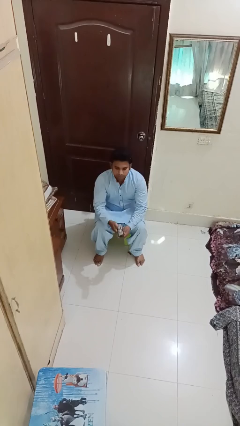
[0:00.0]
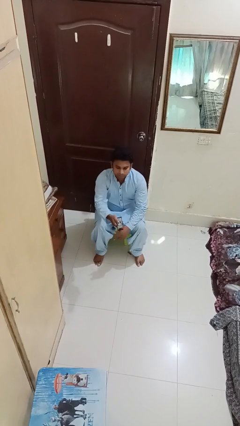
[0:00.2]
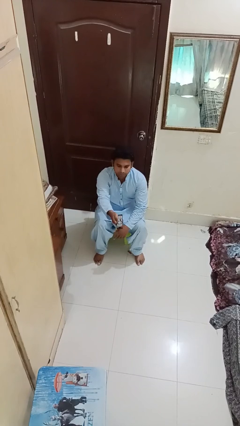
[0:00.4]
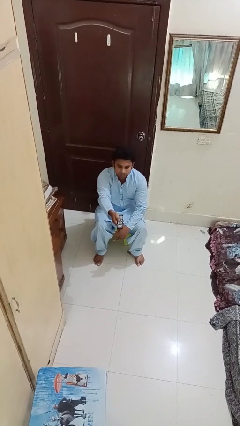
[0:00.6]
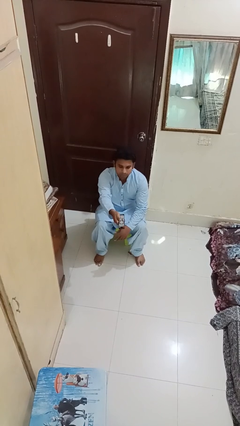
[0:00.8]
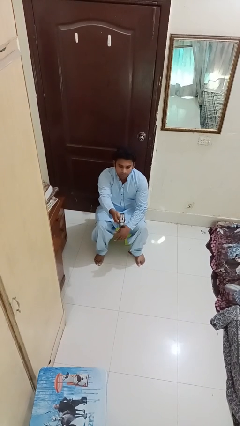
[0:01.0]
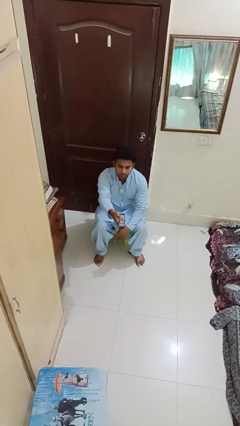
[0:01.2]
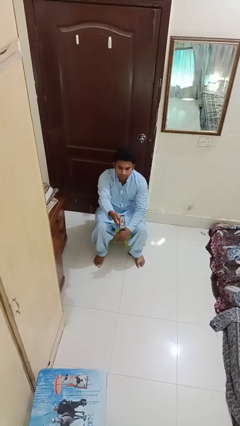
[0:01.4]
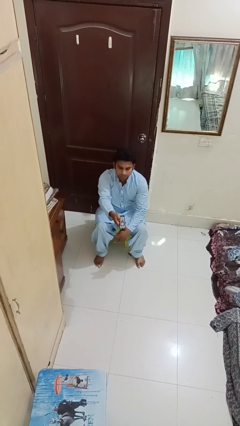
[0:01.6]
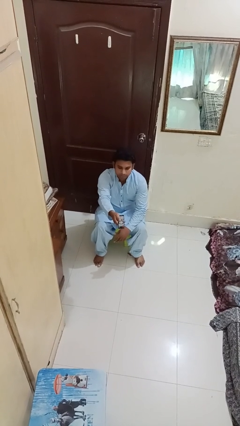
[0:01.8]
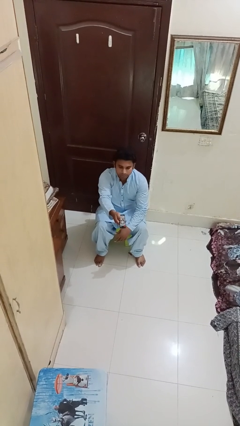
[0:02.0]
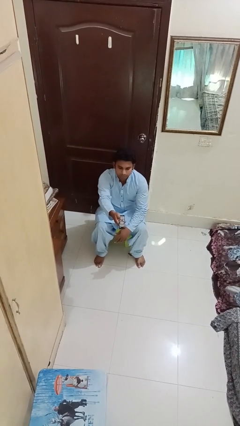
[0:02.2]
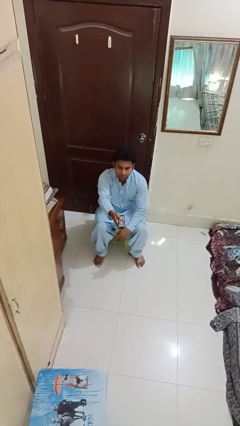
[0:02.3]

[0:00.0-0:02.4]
person uses television remote

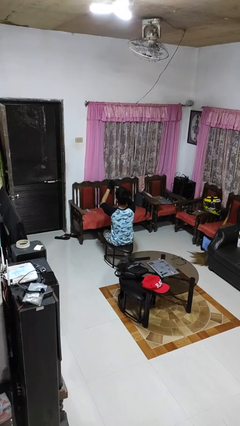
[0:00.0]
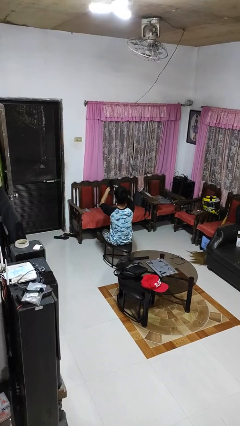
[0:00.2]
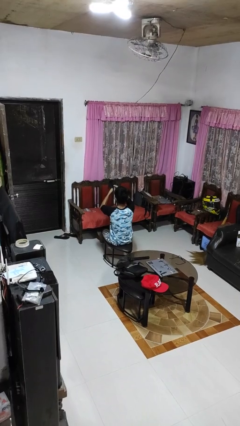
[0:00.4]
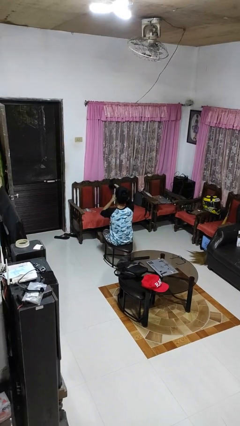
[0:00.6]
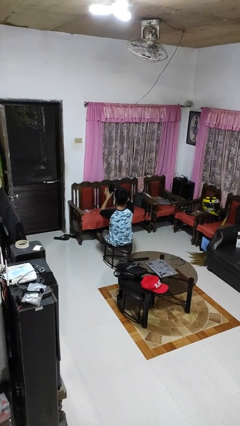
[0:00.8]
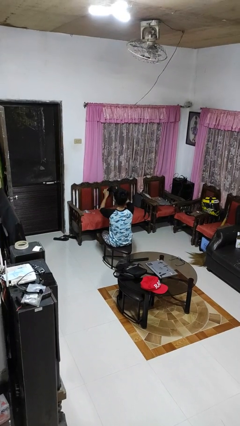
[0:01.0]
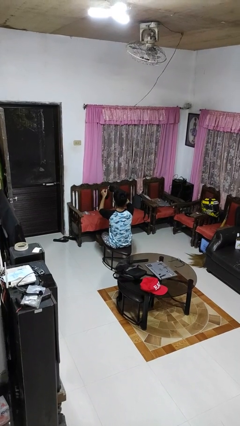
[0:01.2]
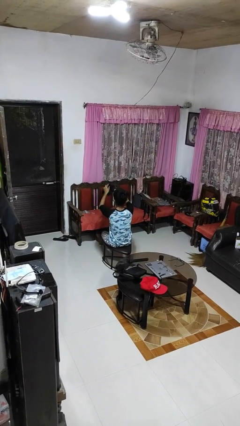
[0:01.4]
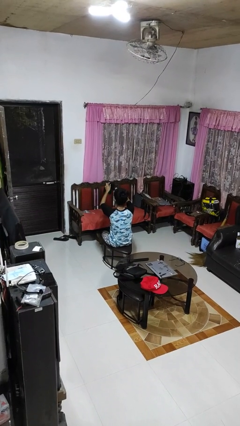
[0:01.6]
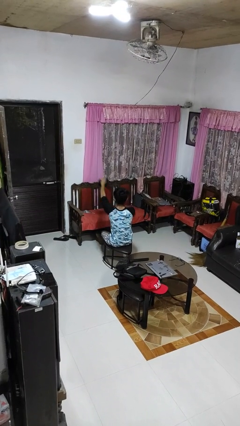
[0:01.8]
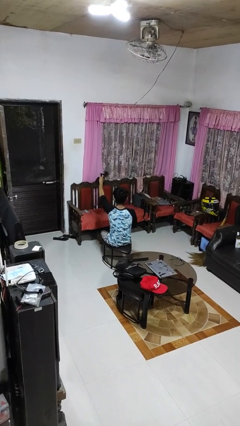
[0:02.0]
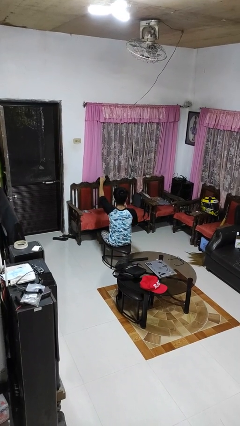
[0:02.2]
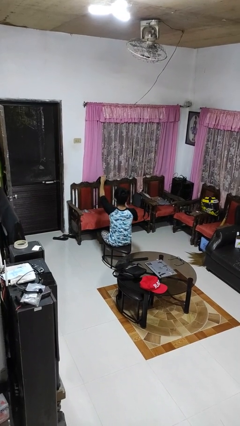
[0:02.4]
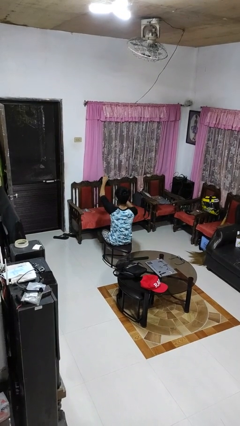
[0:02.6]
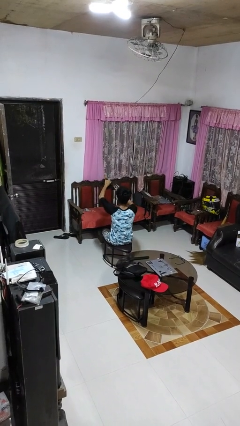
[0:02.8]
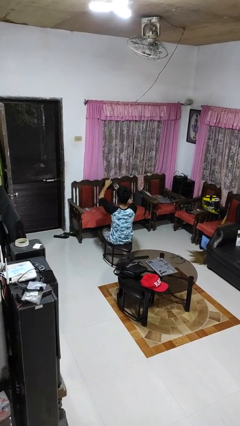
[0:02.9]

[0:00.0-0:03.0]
person takes off gloves

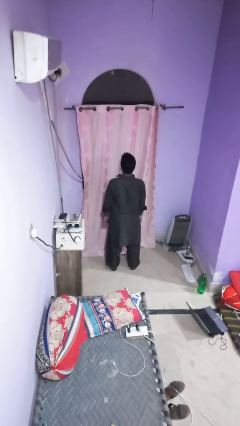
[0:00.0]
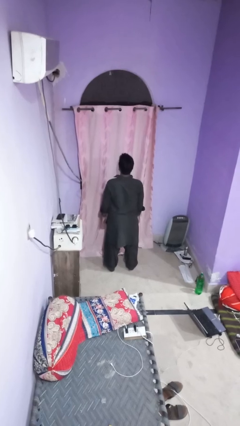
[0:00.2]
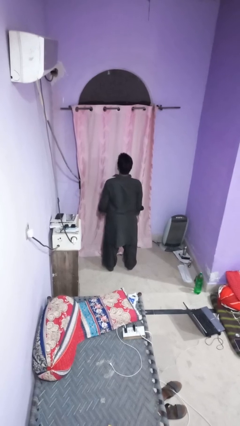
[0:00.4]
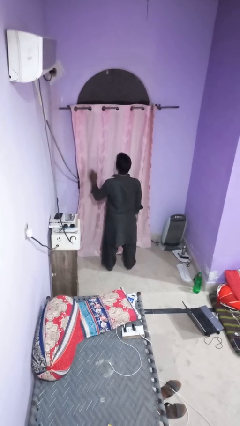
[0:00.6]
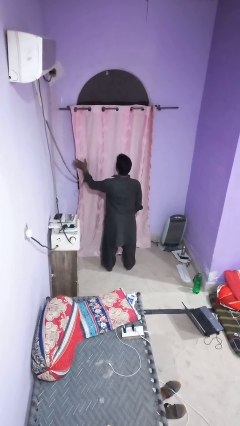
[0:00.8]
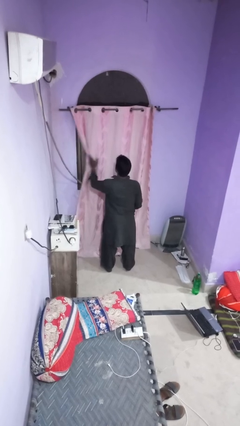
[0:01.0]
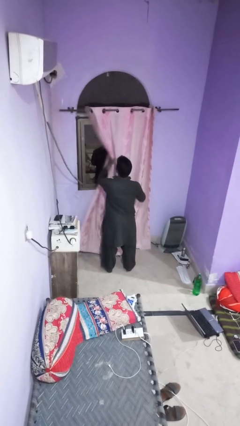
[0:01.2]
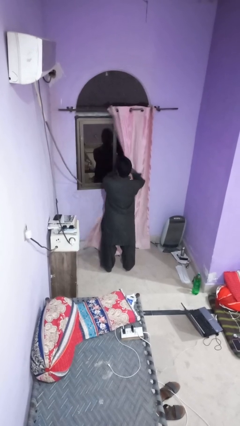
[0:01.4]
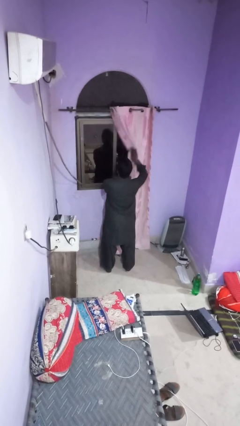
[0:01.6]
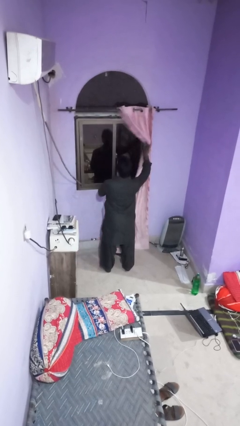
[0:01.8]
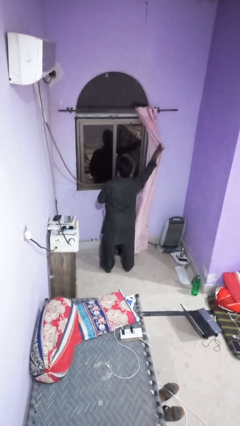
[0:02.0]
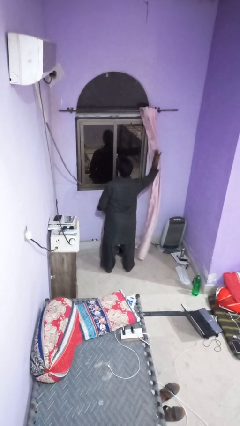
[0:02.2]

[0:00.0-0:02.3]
person opens curtains

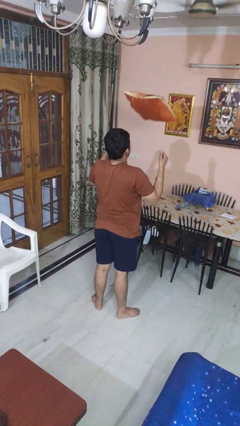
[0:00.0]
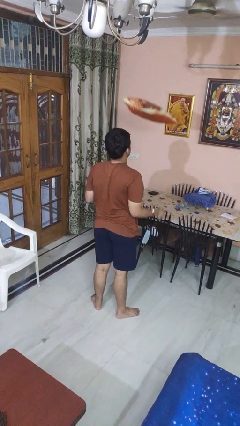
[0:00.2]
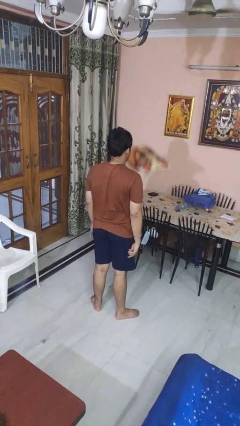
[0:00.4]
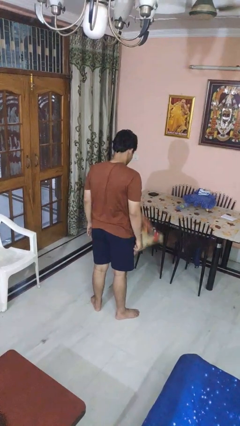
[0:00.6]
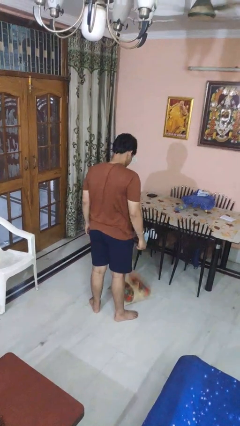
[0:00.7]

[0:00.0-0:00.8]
person throws object into air

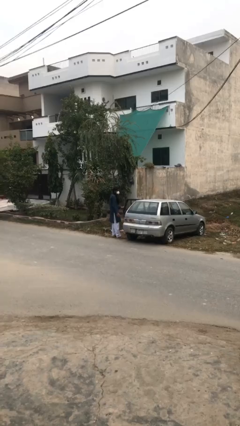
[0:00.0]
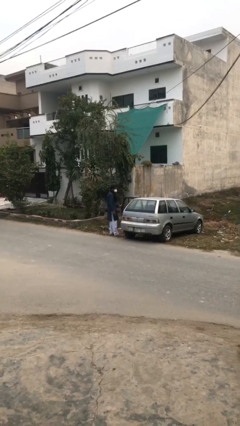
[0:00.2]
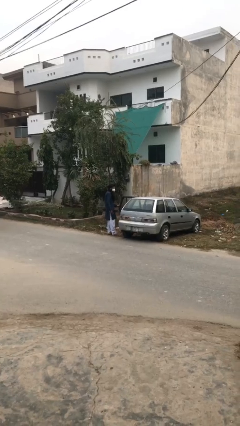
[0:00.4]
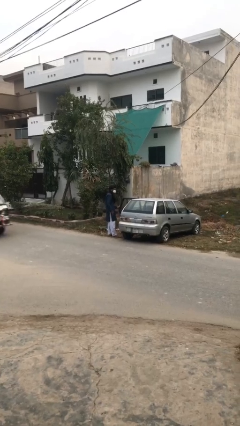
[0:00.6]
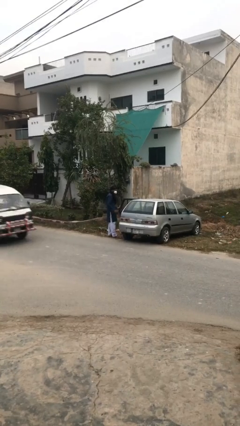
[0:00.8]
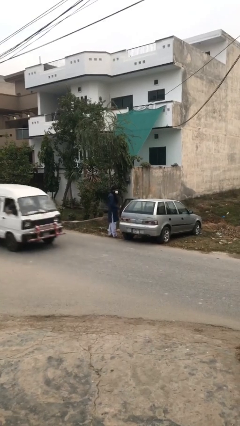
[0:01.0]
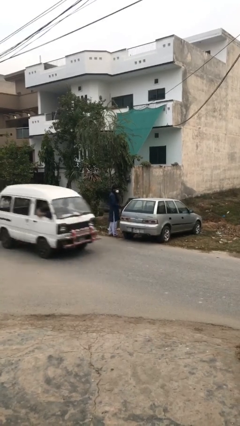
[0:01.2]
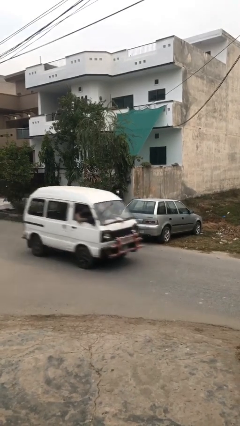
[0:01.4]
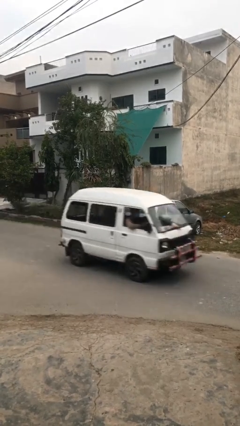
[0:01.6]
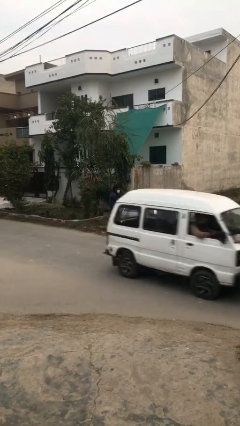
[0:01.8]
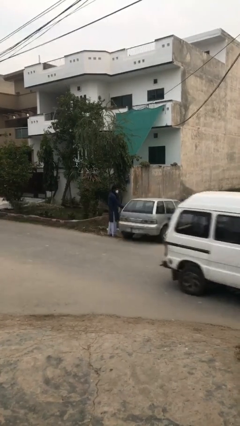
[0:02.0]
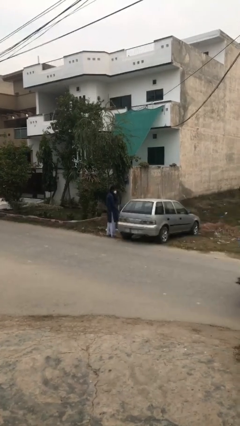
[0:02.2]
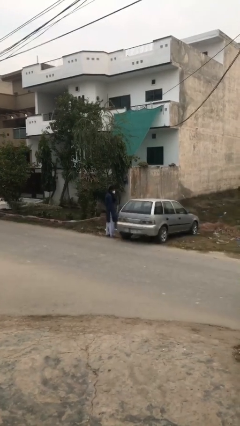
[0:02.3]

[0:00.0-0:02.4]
person closes car door

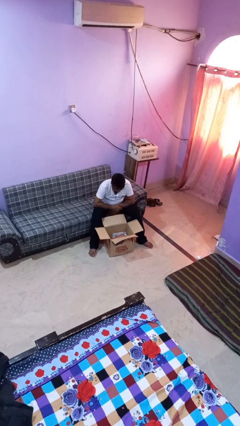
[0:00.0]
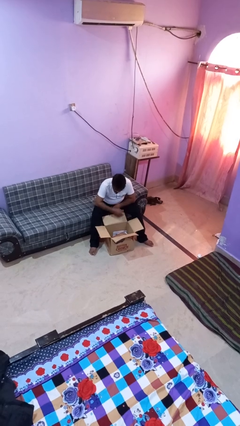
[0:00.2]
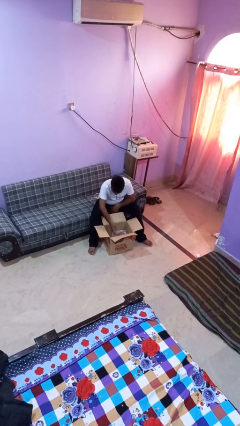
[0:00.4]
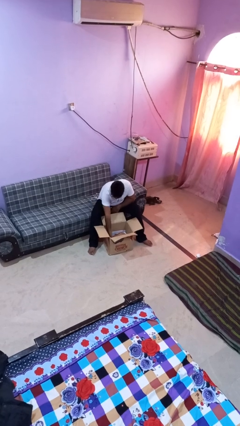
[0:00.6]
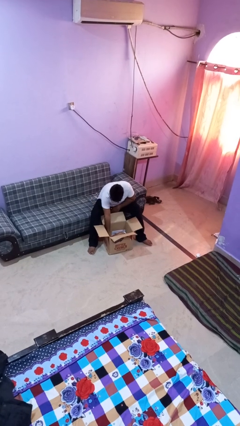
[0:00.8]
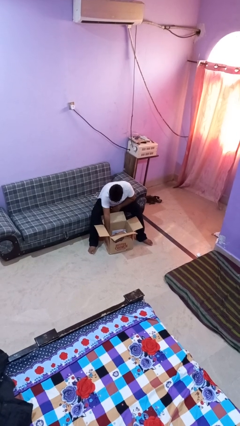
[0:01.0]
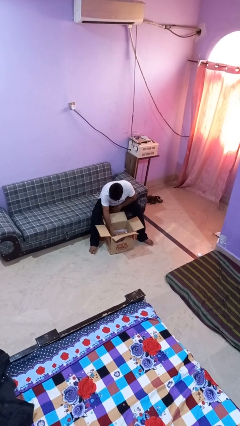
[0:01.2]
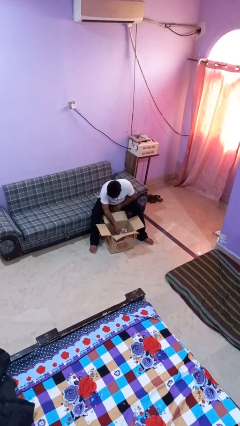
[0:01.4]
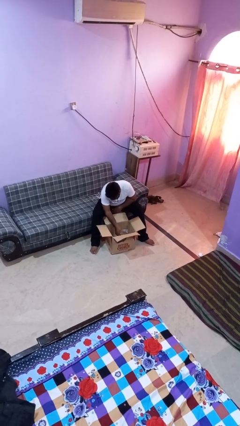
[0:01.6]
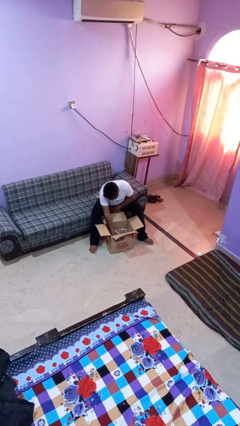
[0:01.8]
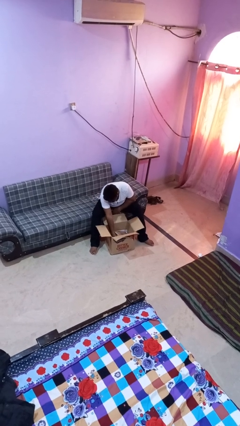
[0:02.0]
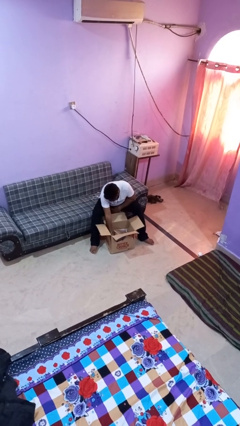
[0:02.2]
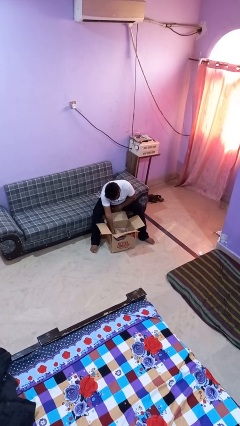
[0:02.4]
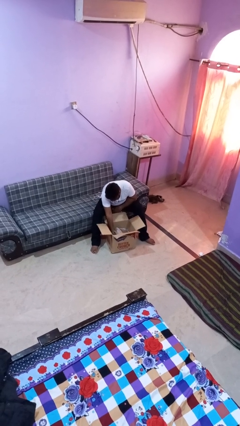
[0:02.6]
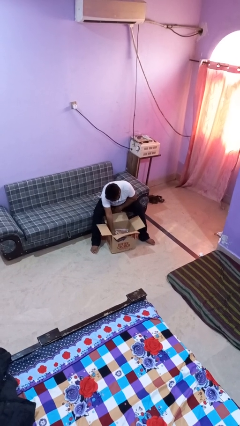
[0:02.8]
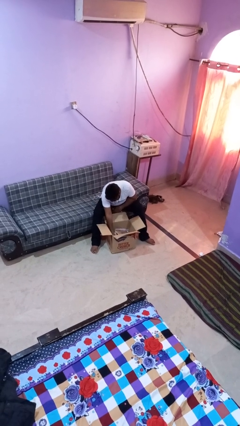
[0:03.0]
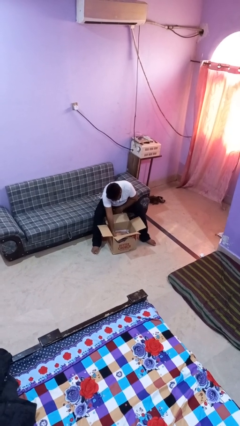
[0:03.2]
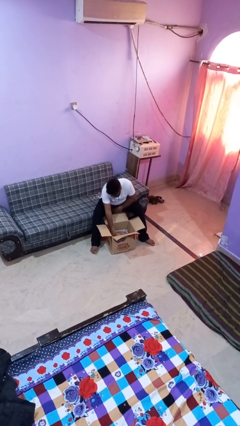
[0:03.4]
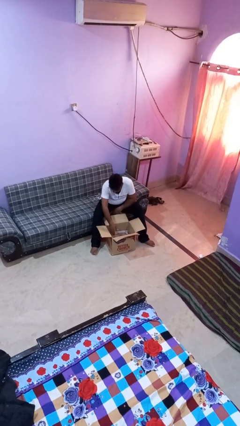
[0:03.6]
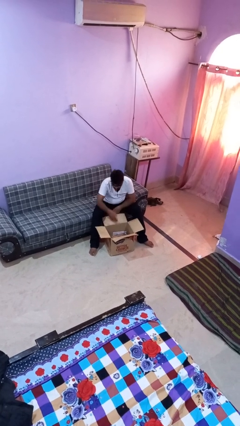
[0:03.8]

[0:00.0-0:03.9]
person searches in box

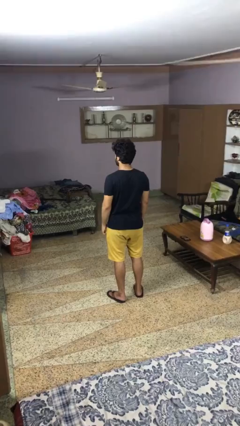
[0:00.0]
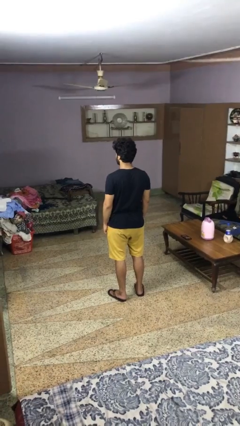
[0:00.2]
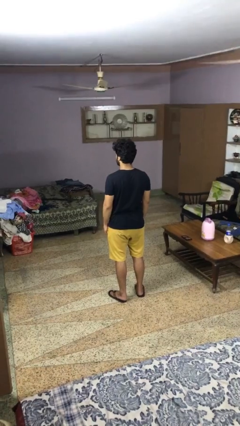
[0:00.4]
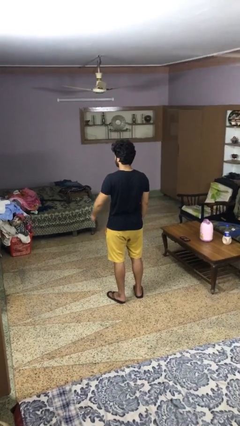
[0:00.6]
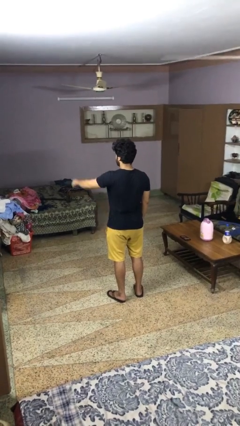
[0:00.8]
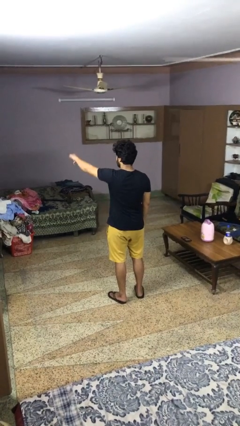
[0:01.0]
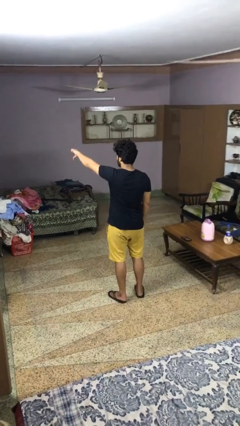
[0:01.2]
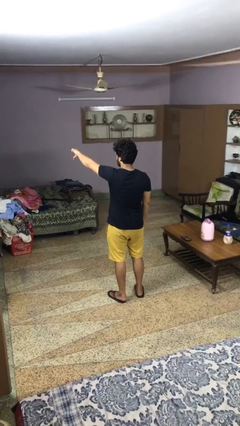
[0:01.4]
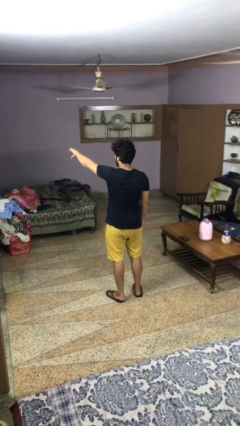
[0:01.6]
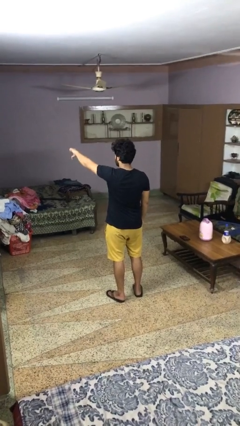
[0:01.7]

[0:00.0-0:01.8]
person gestures thumbs down

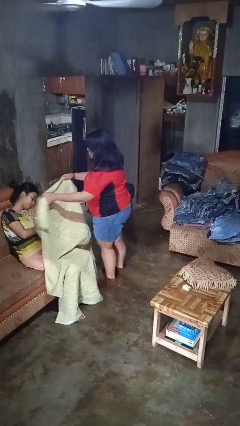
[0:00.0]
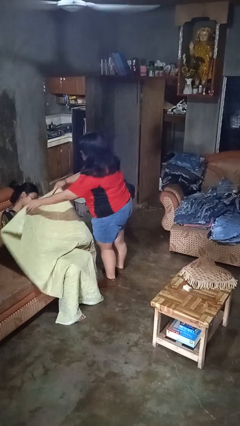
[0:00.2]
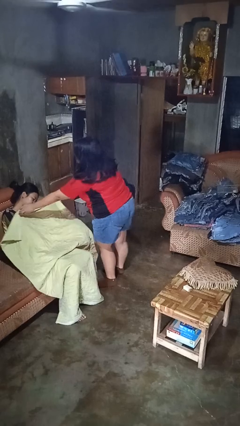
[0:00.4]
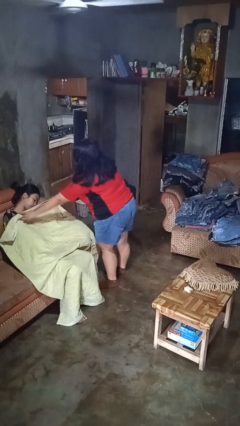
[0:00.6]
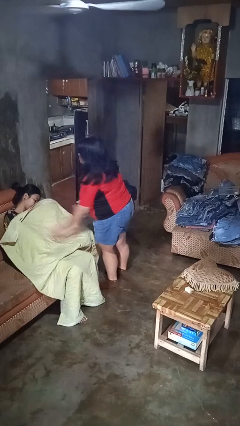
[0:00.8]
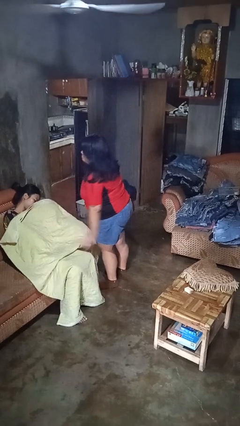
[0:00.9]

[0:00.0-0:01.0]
person covers friend with blanket
